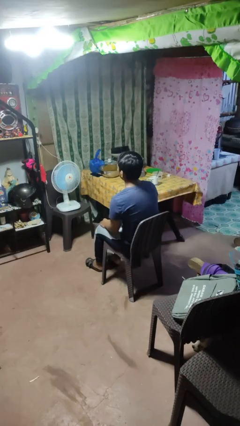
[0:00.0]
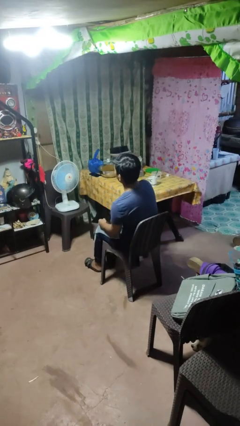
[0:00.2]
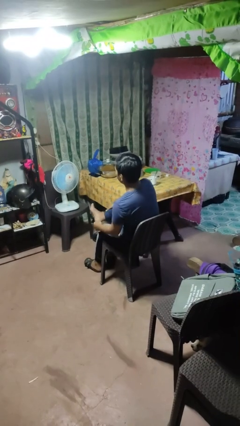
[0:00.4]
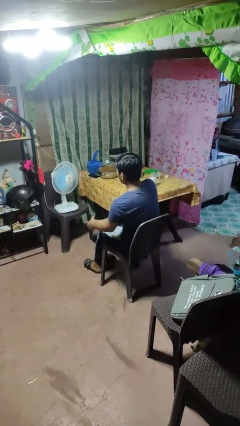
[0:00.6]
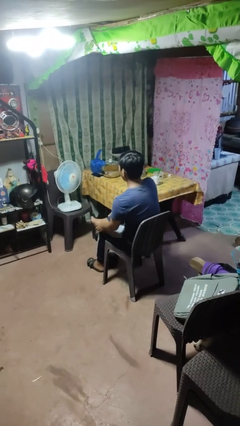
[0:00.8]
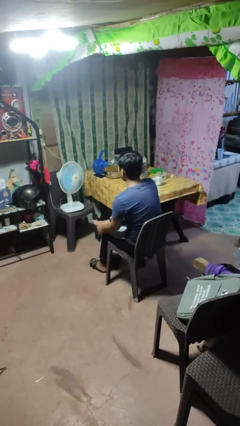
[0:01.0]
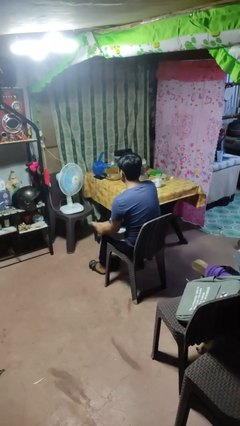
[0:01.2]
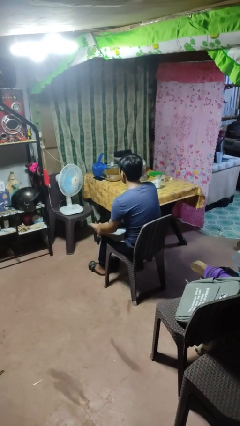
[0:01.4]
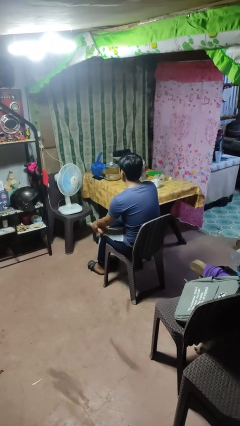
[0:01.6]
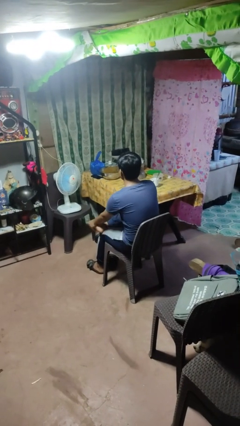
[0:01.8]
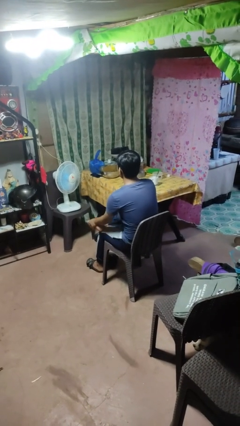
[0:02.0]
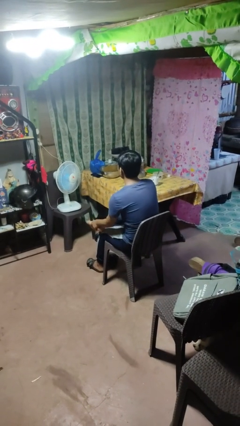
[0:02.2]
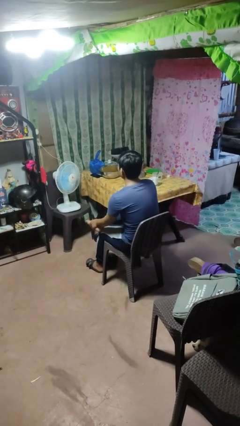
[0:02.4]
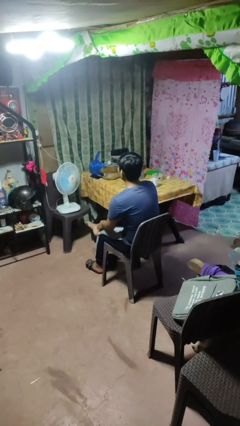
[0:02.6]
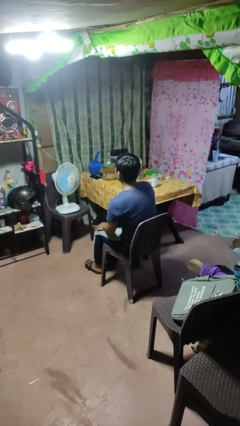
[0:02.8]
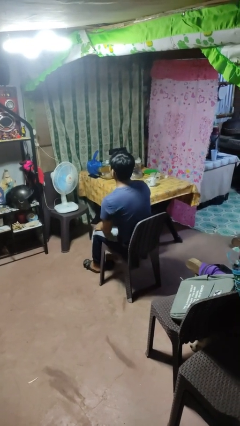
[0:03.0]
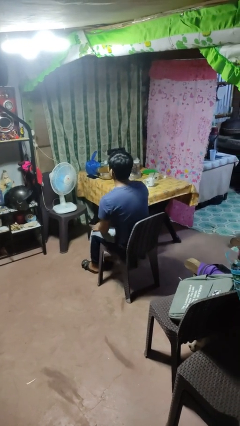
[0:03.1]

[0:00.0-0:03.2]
person rubs foot

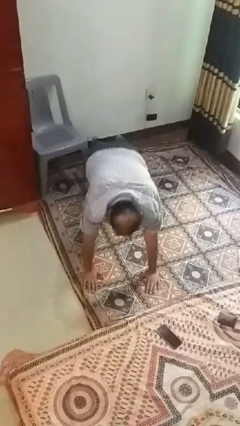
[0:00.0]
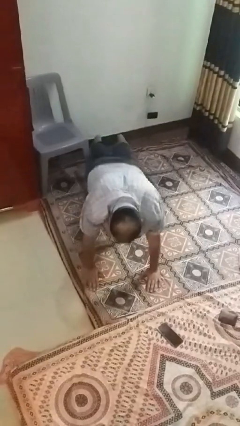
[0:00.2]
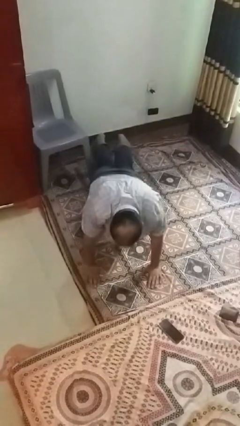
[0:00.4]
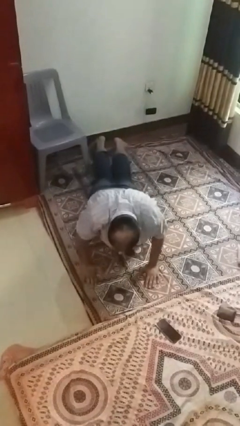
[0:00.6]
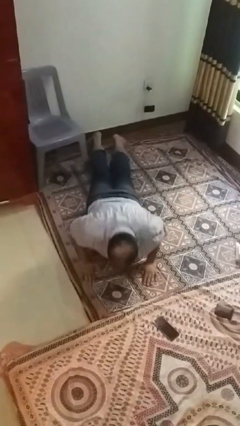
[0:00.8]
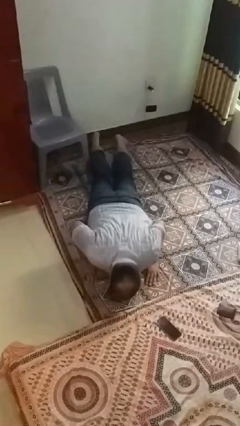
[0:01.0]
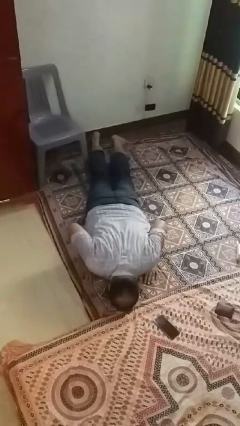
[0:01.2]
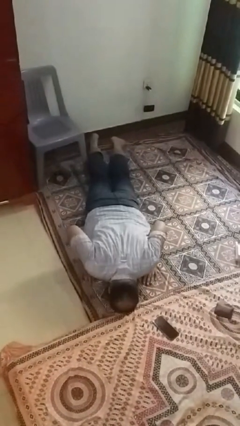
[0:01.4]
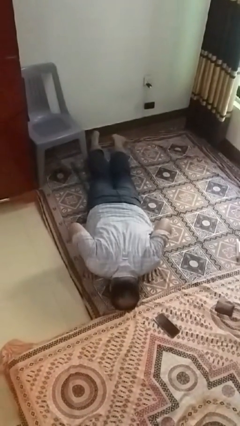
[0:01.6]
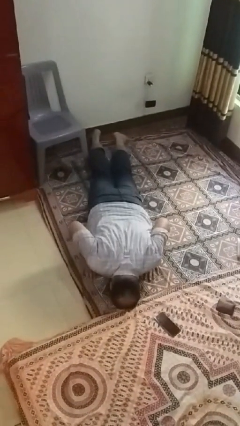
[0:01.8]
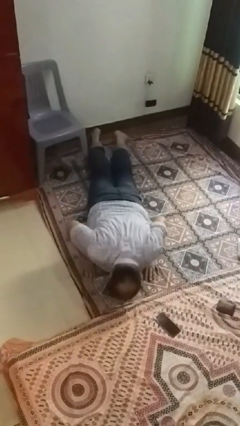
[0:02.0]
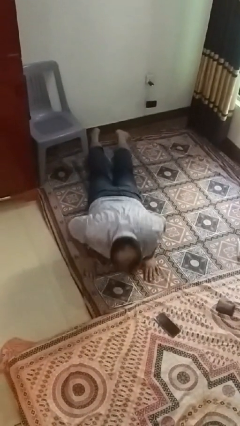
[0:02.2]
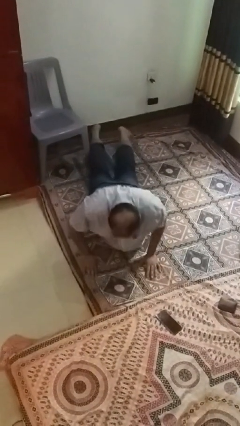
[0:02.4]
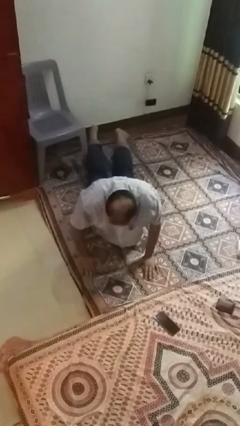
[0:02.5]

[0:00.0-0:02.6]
person exercises with pushup

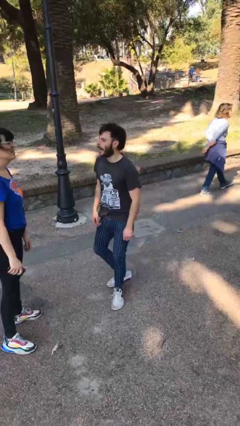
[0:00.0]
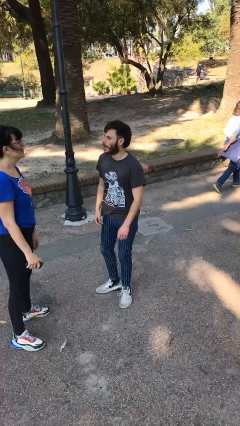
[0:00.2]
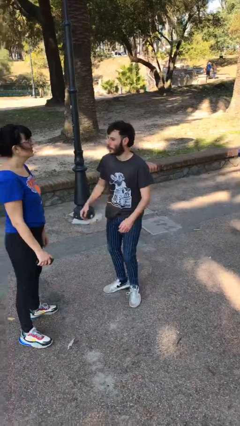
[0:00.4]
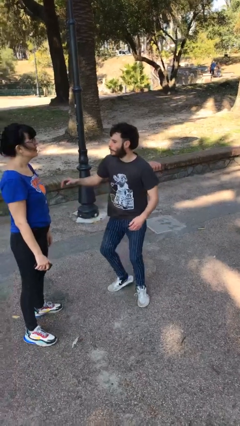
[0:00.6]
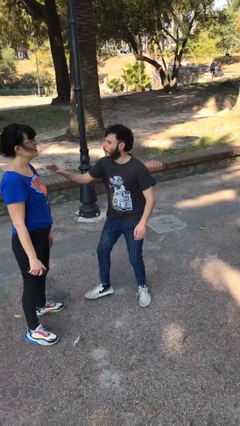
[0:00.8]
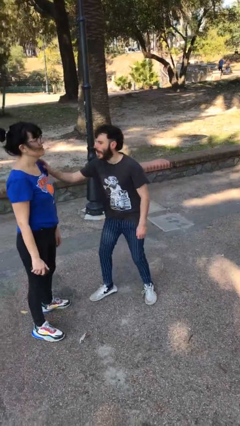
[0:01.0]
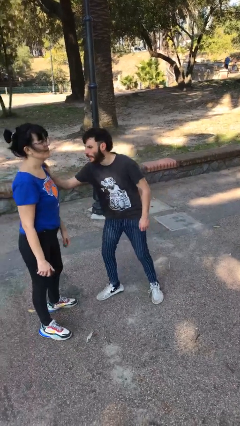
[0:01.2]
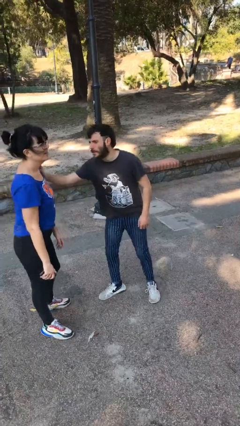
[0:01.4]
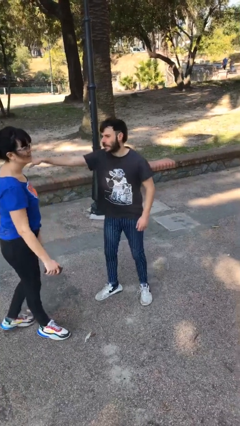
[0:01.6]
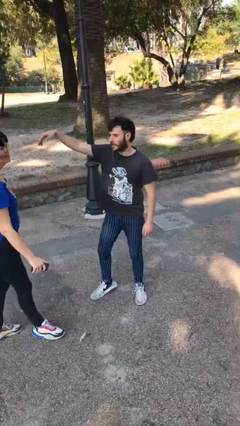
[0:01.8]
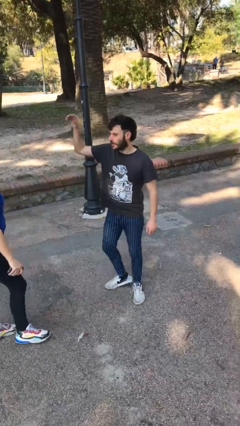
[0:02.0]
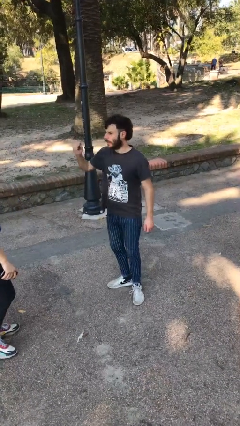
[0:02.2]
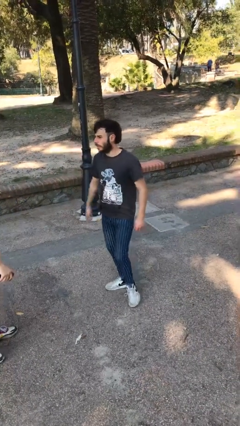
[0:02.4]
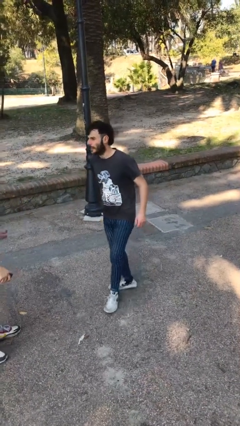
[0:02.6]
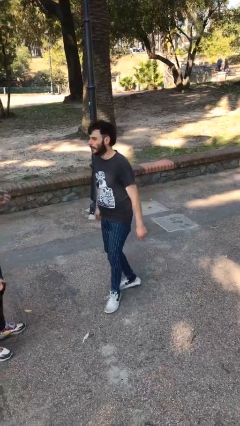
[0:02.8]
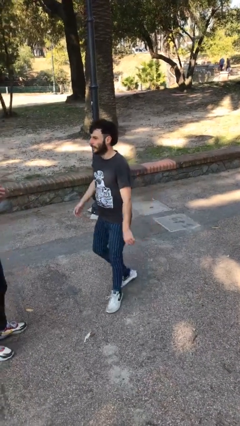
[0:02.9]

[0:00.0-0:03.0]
person shoves person

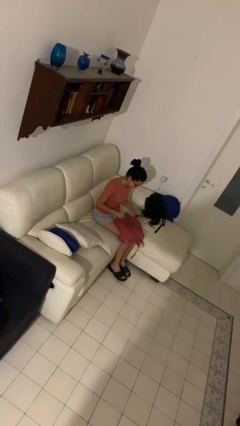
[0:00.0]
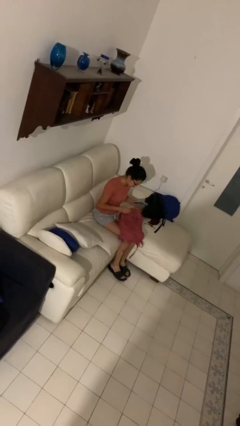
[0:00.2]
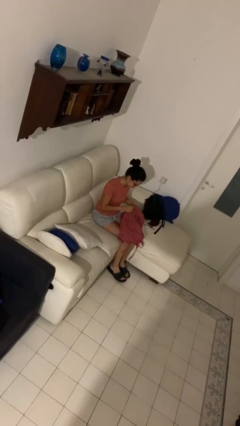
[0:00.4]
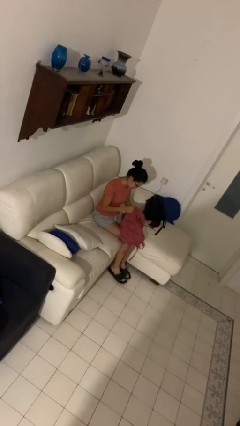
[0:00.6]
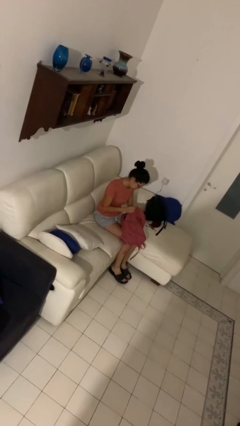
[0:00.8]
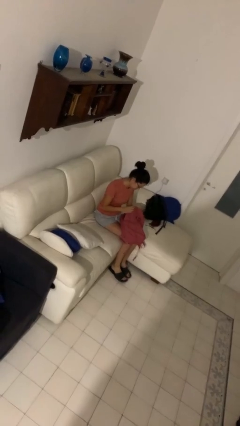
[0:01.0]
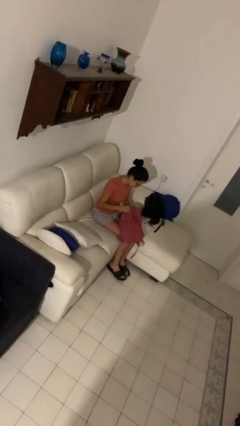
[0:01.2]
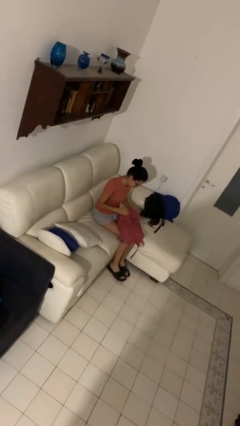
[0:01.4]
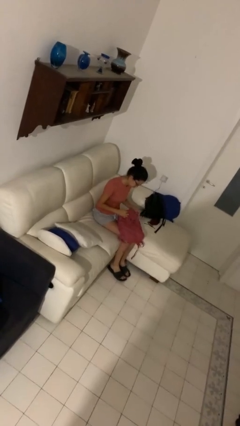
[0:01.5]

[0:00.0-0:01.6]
person puts object into purse

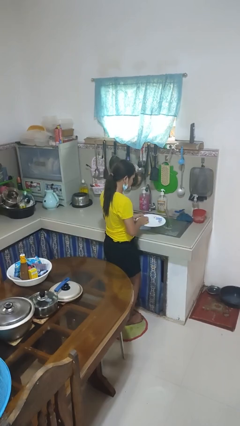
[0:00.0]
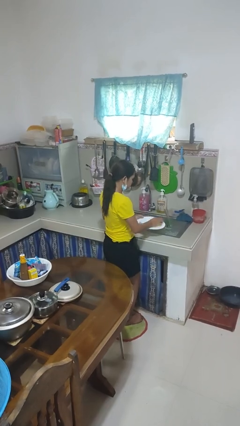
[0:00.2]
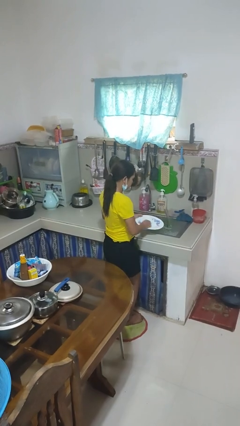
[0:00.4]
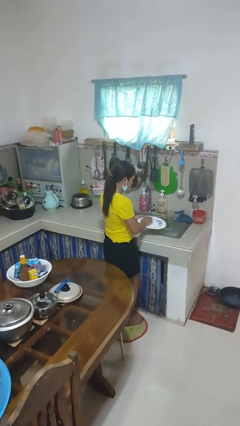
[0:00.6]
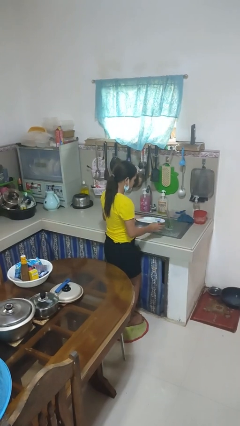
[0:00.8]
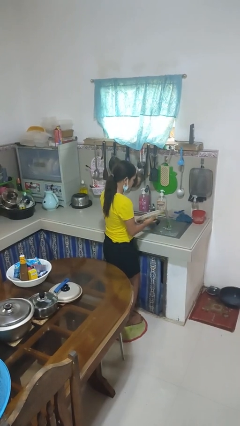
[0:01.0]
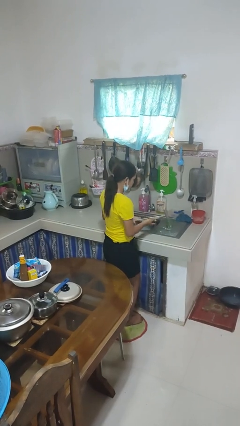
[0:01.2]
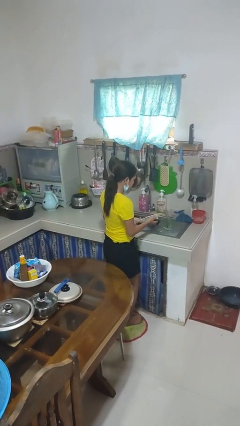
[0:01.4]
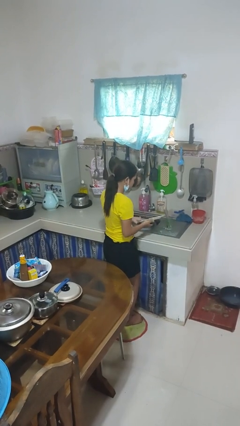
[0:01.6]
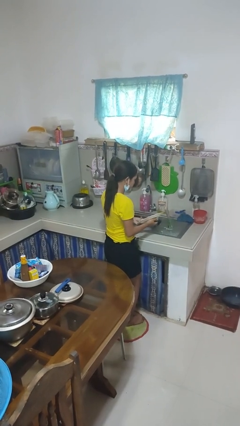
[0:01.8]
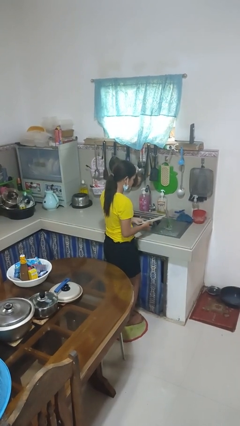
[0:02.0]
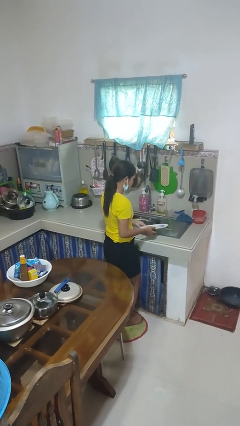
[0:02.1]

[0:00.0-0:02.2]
person washes dish

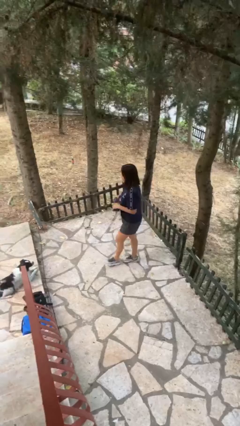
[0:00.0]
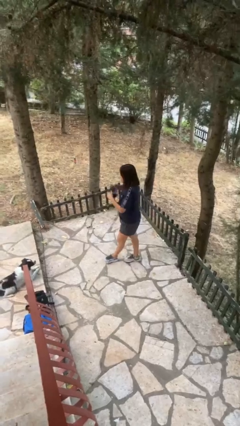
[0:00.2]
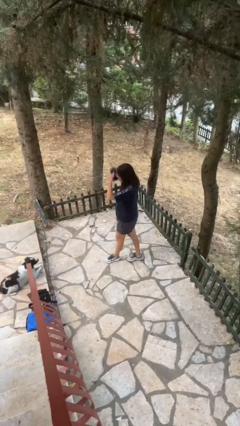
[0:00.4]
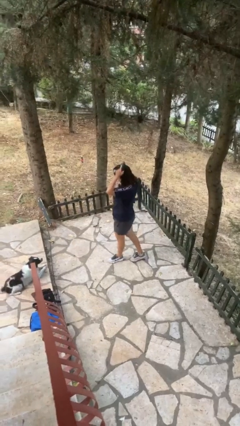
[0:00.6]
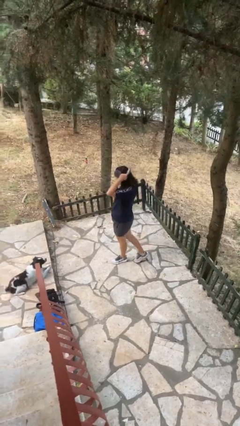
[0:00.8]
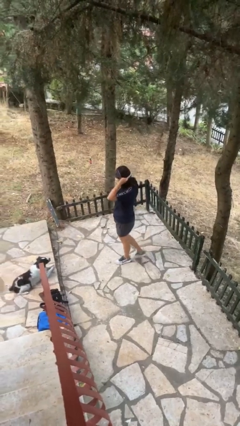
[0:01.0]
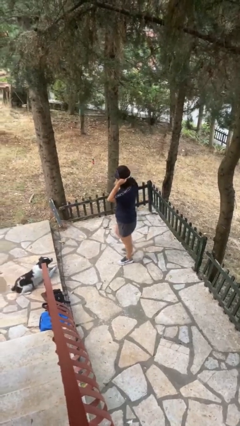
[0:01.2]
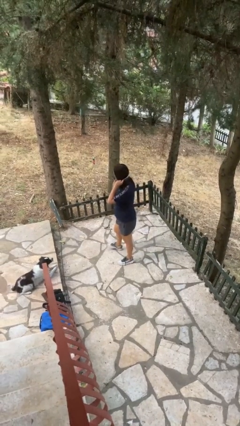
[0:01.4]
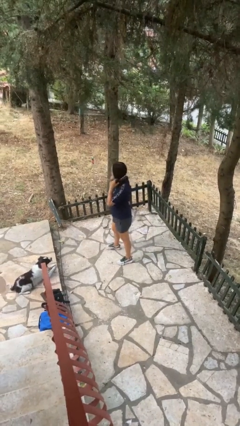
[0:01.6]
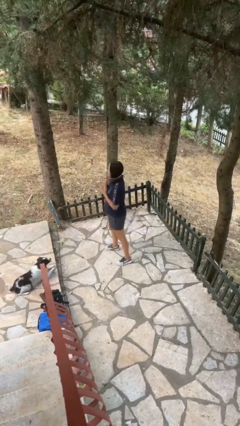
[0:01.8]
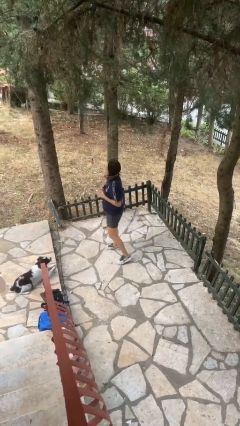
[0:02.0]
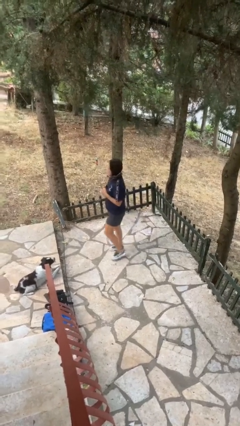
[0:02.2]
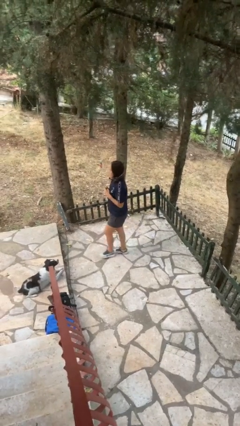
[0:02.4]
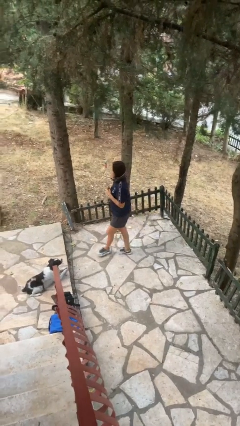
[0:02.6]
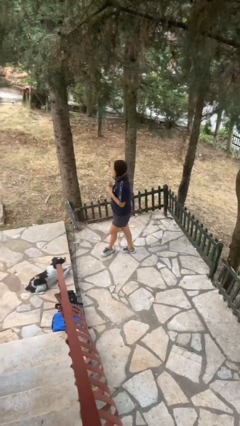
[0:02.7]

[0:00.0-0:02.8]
person puts on scarf

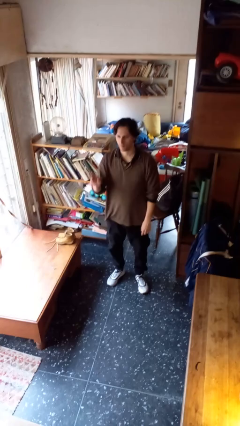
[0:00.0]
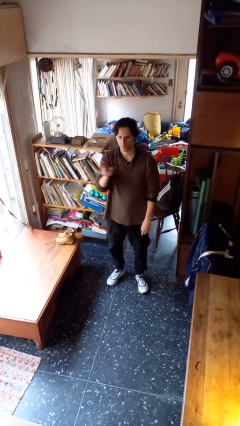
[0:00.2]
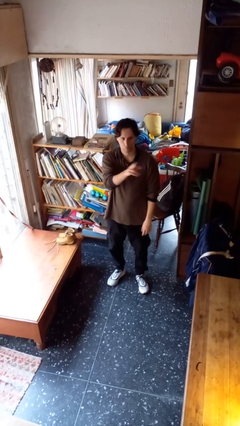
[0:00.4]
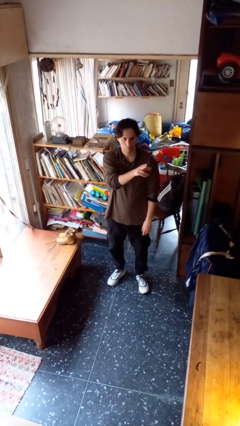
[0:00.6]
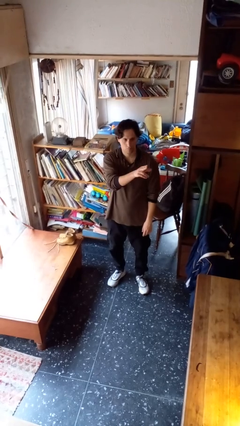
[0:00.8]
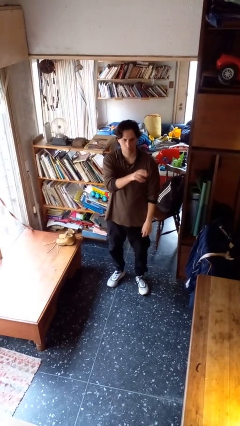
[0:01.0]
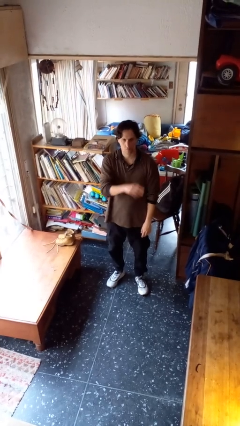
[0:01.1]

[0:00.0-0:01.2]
person gestures swipe left

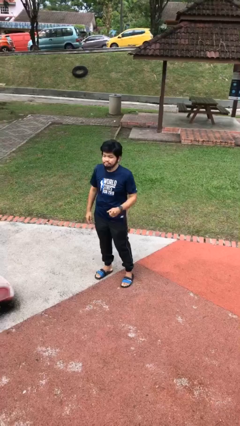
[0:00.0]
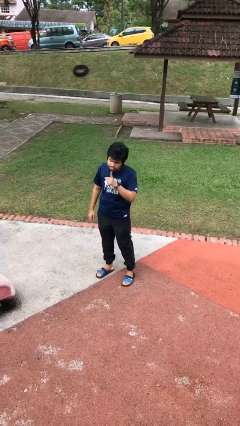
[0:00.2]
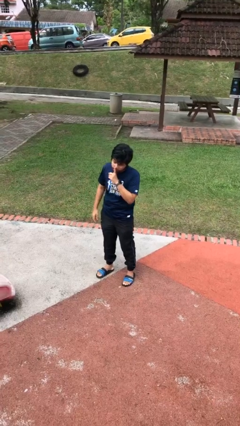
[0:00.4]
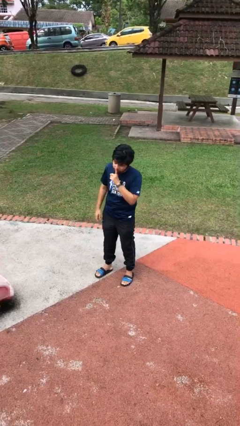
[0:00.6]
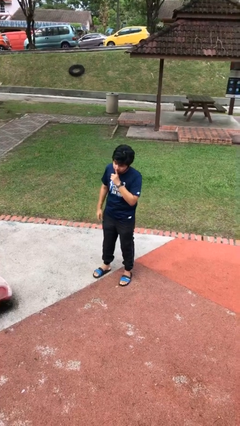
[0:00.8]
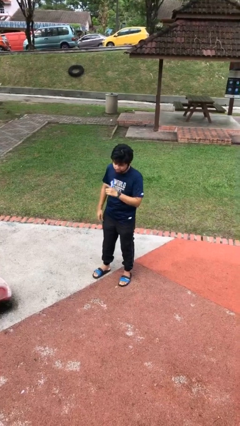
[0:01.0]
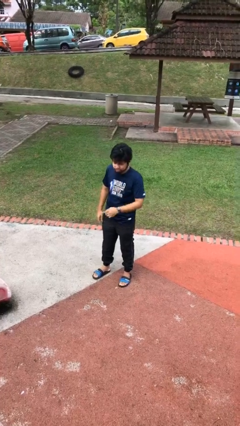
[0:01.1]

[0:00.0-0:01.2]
person gestures be quiet
